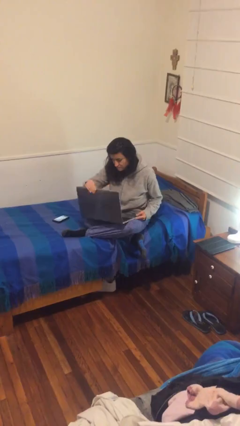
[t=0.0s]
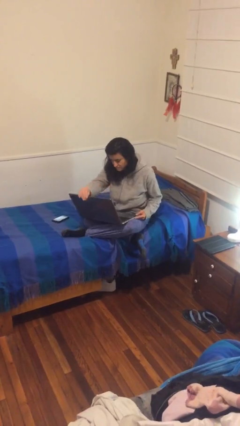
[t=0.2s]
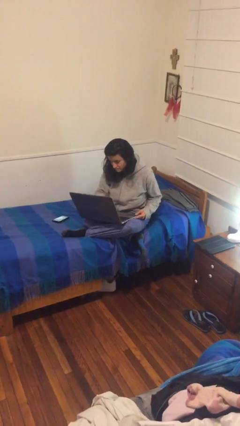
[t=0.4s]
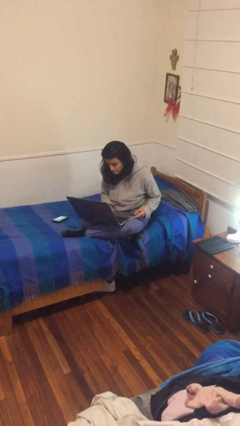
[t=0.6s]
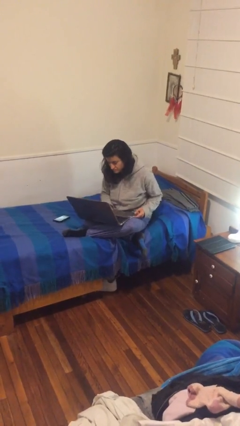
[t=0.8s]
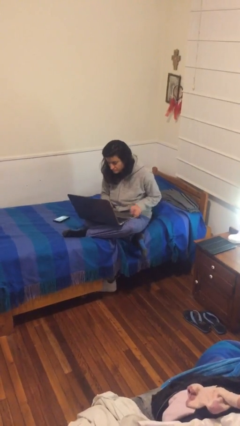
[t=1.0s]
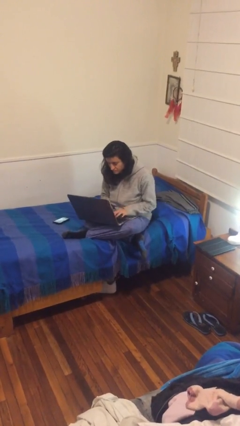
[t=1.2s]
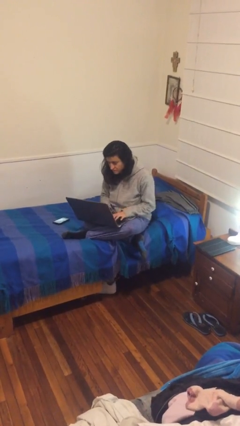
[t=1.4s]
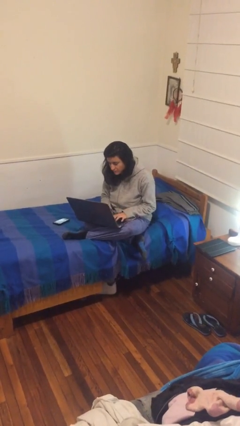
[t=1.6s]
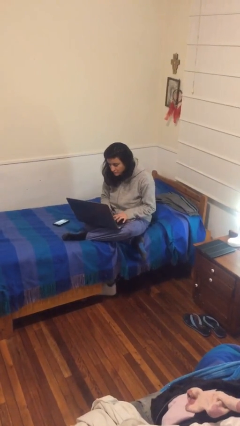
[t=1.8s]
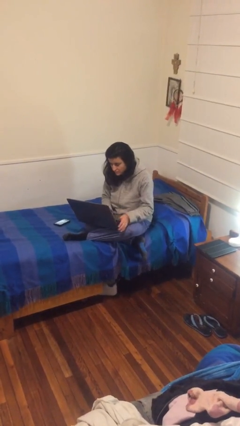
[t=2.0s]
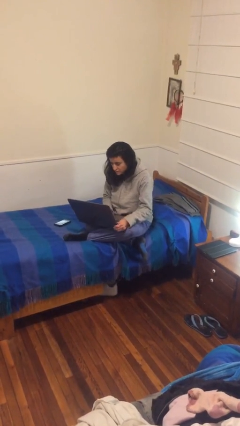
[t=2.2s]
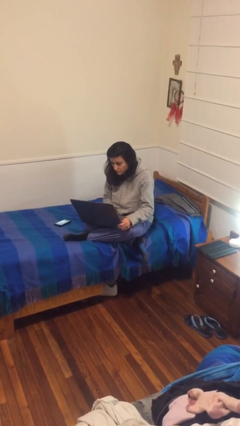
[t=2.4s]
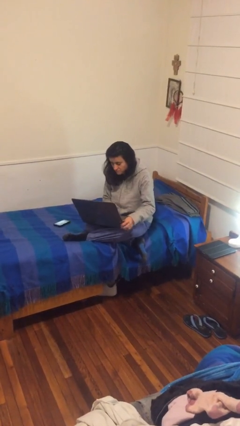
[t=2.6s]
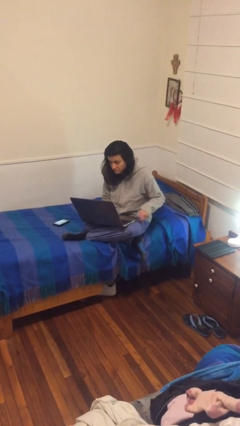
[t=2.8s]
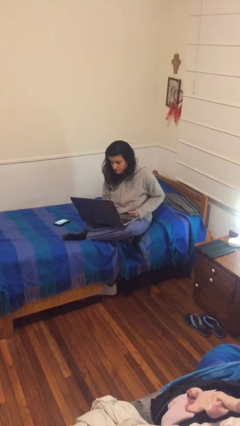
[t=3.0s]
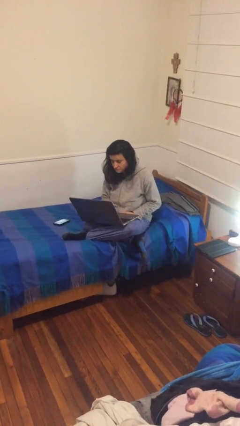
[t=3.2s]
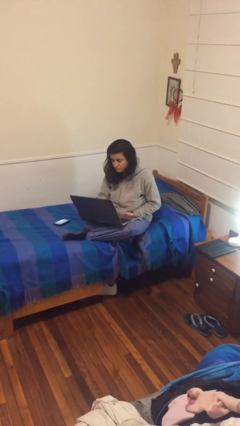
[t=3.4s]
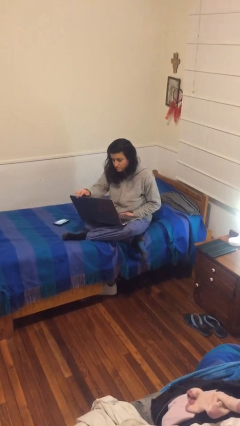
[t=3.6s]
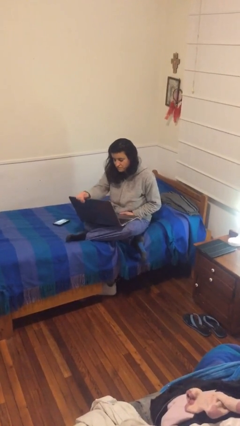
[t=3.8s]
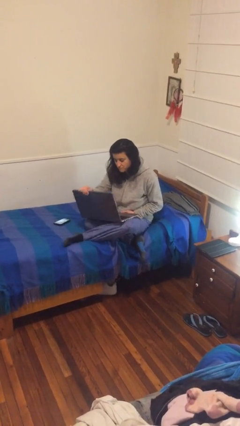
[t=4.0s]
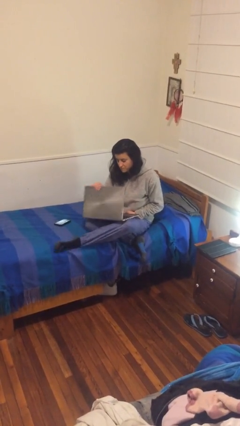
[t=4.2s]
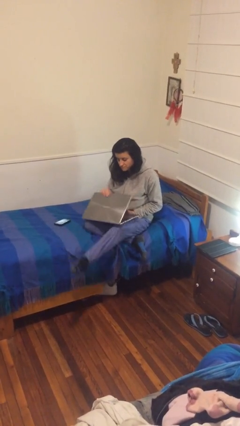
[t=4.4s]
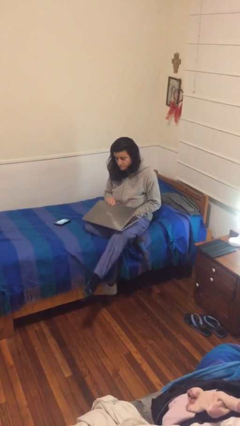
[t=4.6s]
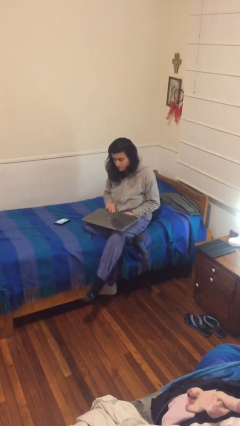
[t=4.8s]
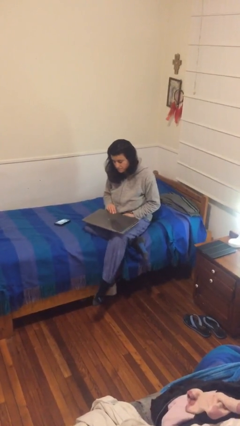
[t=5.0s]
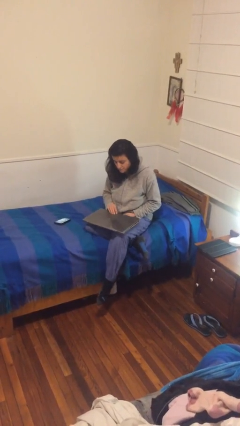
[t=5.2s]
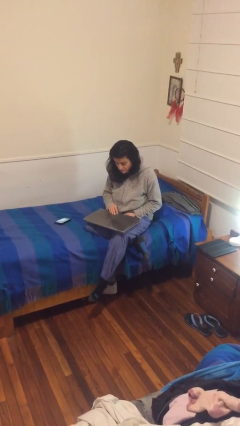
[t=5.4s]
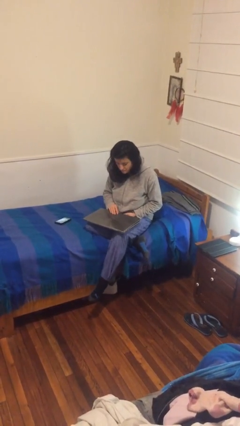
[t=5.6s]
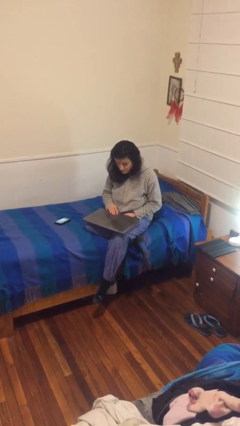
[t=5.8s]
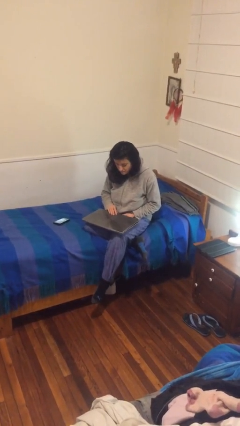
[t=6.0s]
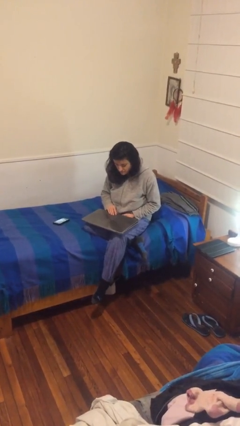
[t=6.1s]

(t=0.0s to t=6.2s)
person interacts with laptop

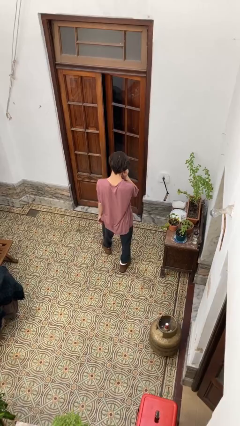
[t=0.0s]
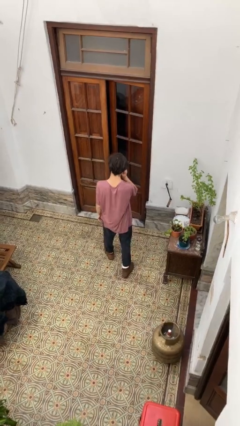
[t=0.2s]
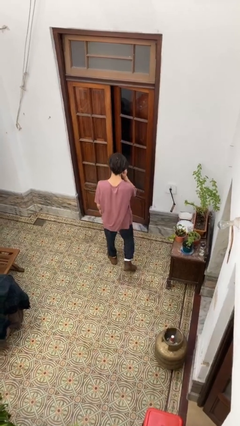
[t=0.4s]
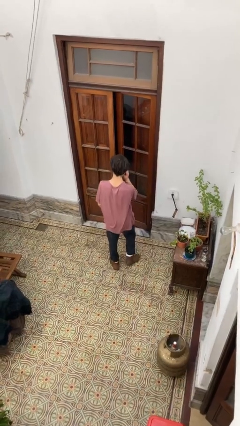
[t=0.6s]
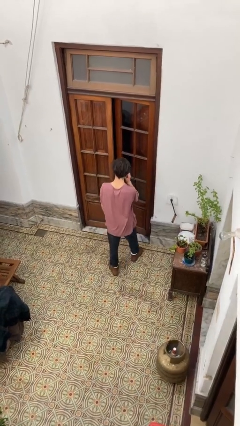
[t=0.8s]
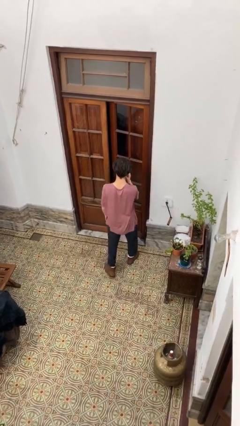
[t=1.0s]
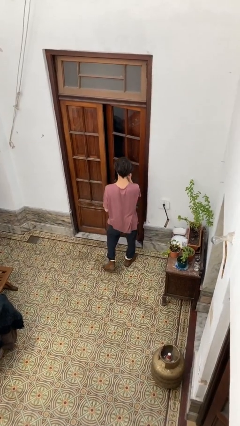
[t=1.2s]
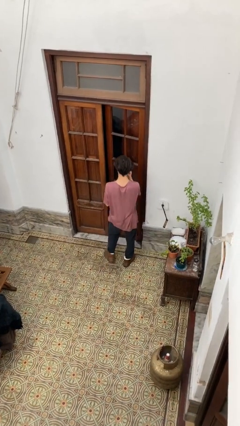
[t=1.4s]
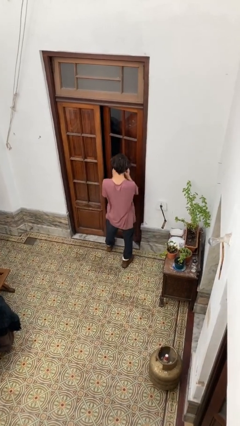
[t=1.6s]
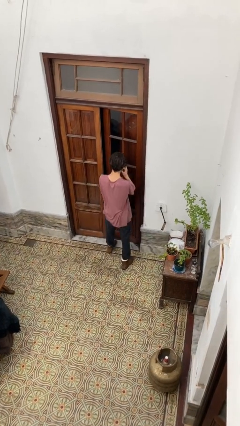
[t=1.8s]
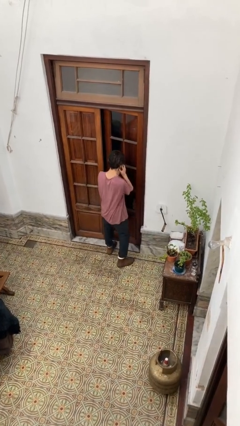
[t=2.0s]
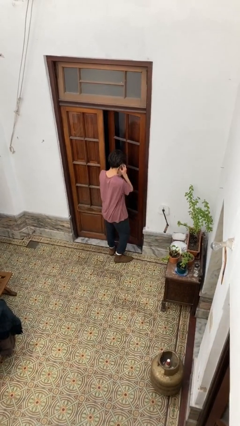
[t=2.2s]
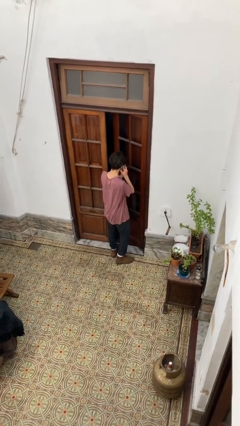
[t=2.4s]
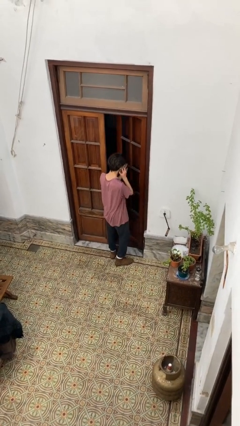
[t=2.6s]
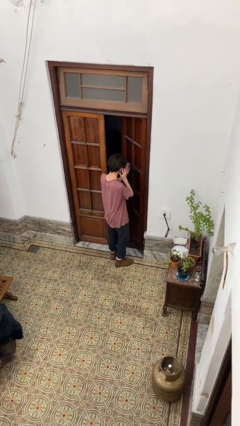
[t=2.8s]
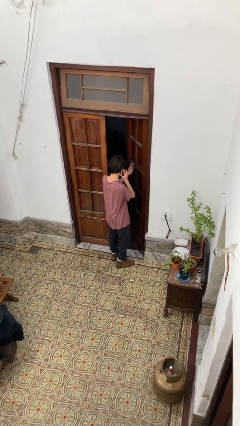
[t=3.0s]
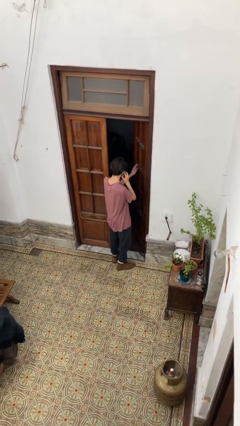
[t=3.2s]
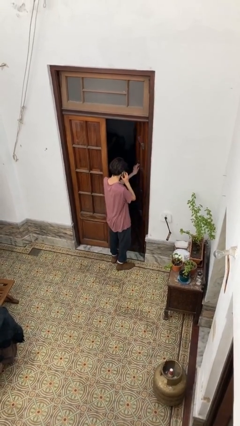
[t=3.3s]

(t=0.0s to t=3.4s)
person opens facility door

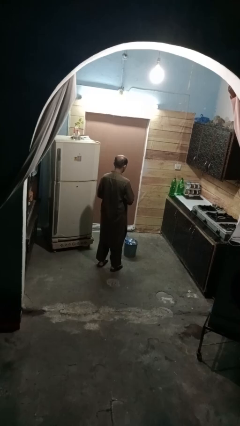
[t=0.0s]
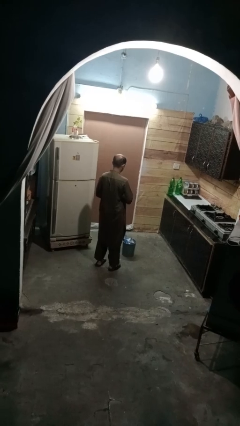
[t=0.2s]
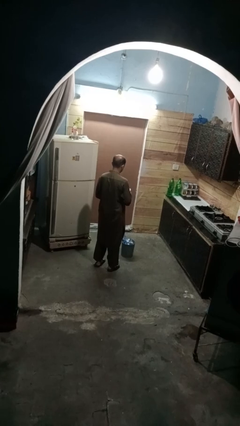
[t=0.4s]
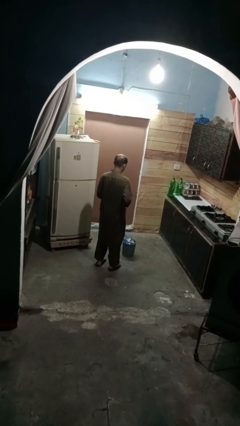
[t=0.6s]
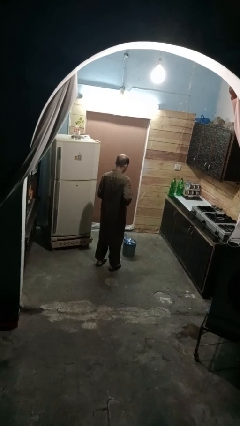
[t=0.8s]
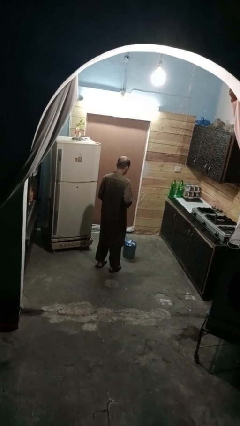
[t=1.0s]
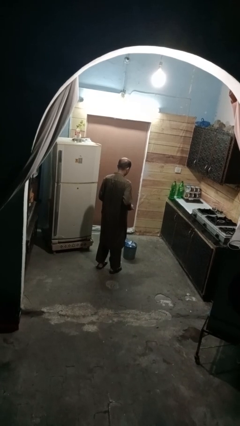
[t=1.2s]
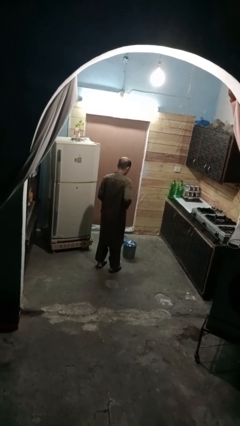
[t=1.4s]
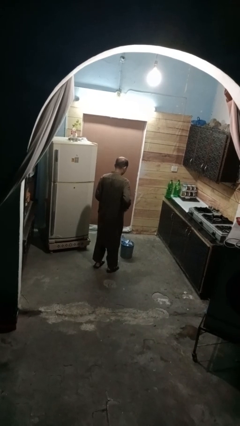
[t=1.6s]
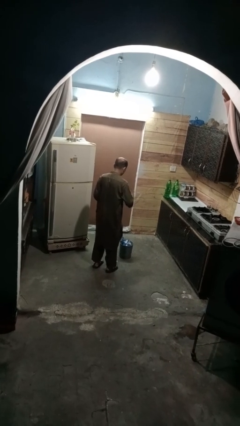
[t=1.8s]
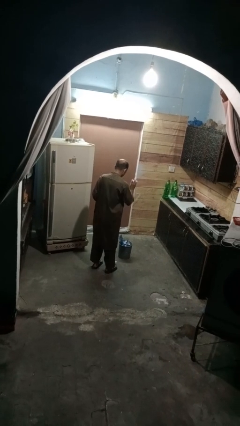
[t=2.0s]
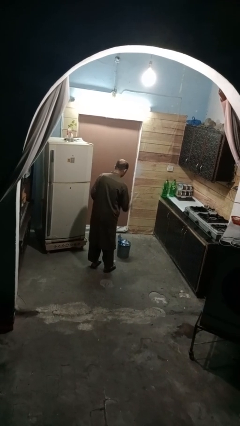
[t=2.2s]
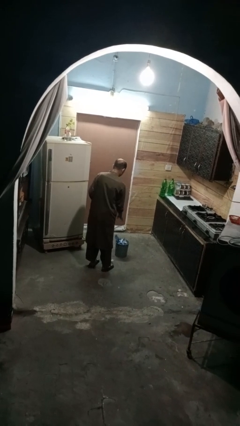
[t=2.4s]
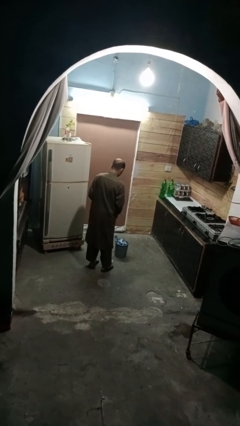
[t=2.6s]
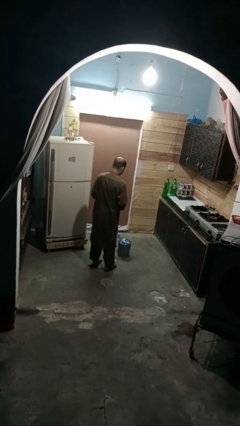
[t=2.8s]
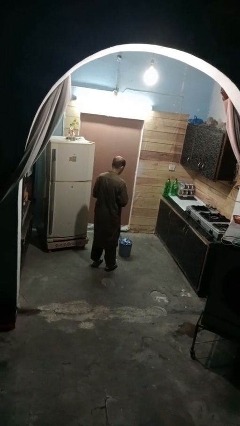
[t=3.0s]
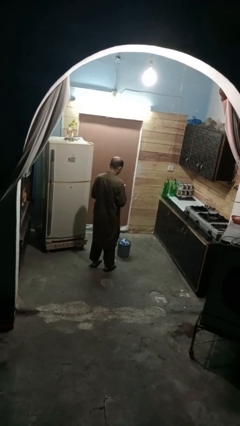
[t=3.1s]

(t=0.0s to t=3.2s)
person discards trash

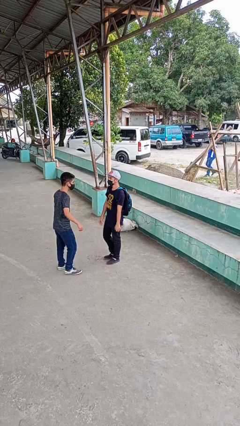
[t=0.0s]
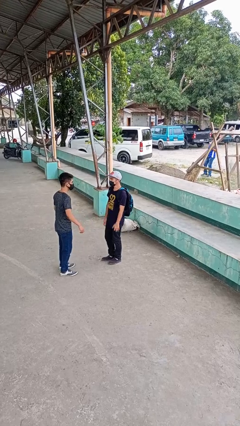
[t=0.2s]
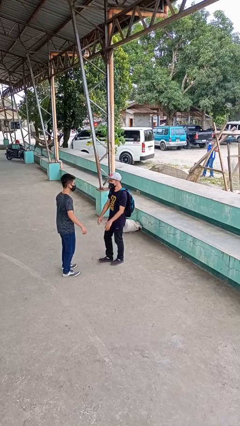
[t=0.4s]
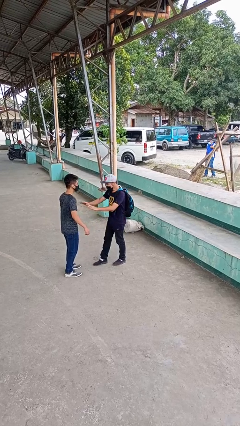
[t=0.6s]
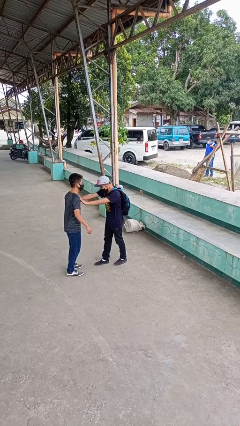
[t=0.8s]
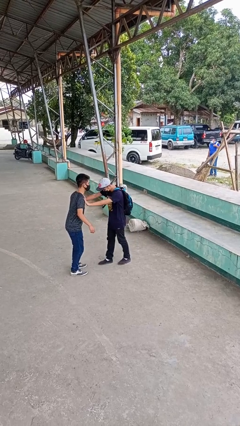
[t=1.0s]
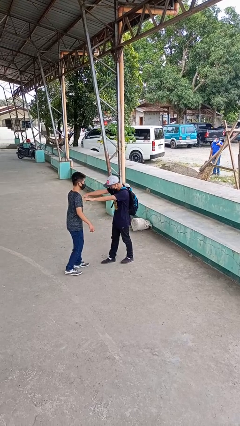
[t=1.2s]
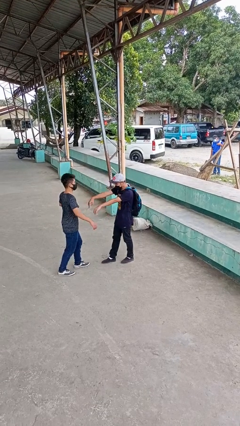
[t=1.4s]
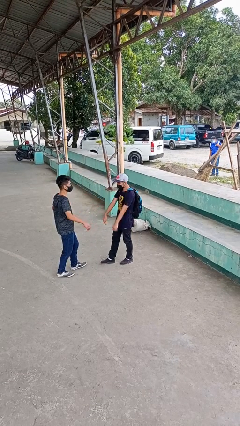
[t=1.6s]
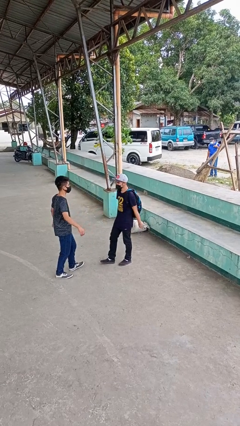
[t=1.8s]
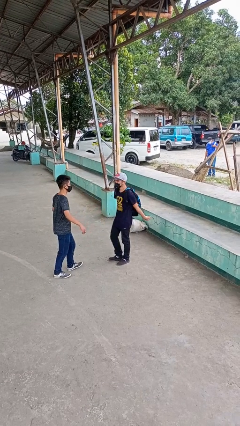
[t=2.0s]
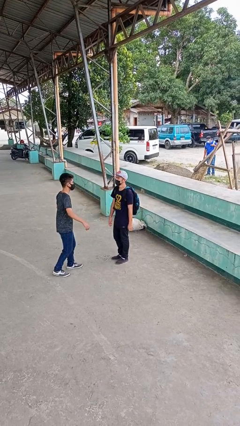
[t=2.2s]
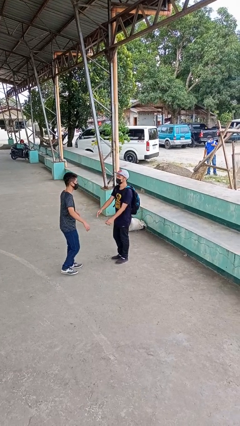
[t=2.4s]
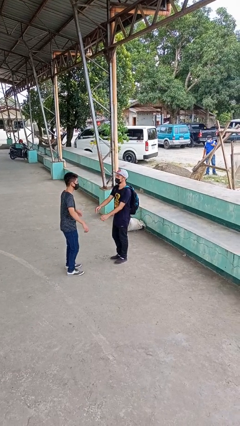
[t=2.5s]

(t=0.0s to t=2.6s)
person shoves person

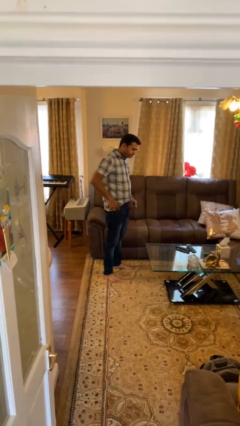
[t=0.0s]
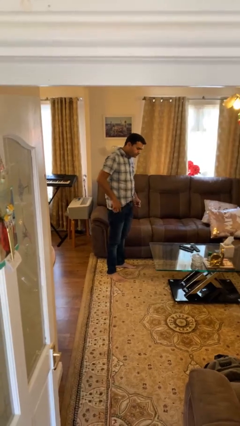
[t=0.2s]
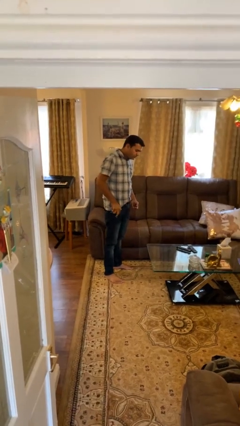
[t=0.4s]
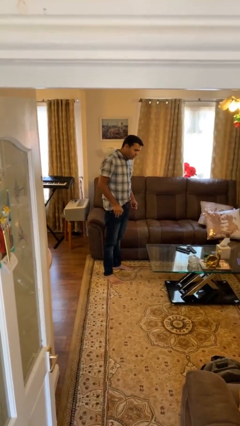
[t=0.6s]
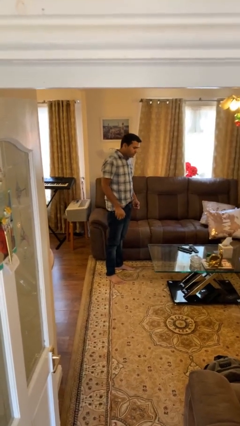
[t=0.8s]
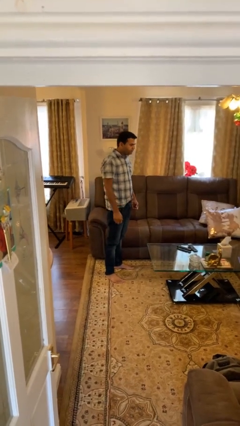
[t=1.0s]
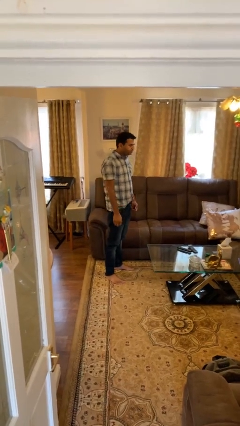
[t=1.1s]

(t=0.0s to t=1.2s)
person puts phone into pocket

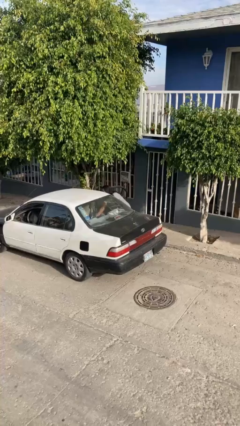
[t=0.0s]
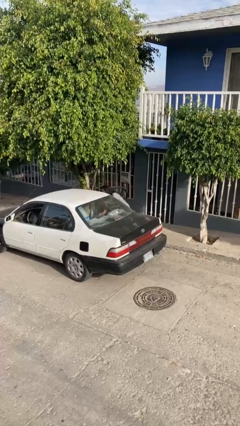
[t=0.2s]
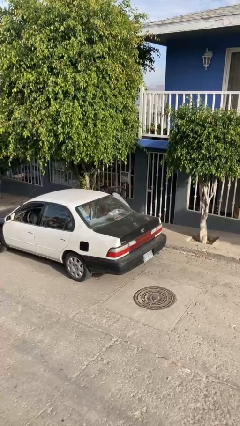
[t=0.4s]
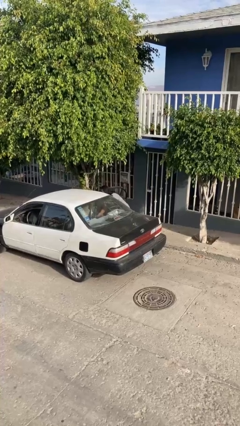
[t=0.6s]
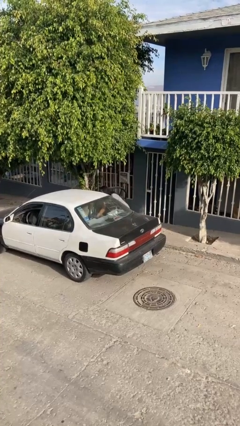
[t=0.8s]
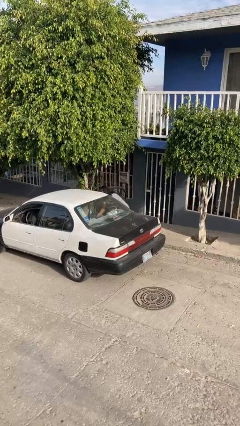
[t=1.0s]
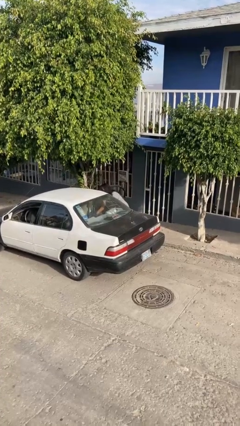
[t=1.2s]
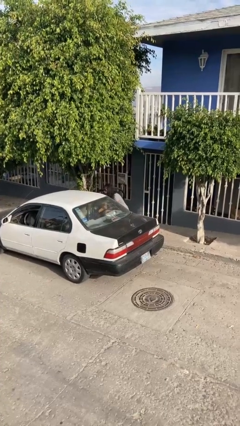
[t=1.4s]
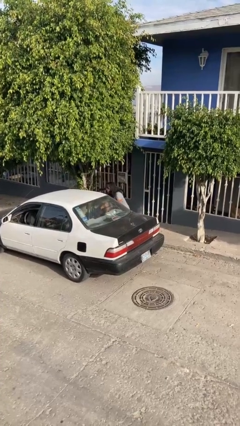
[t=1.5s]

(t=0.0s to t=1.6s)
person loads car
